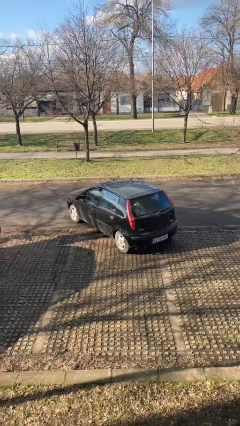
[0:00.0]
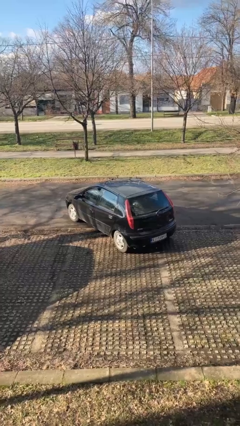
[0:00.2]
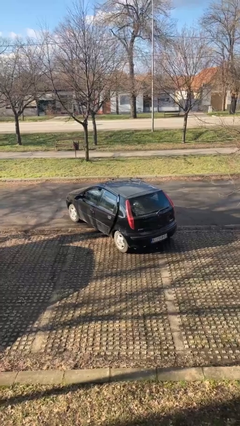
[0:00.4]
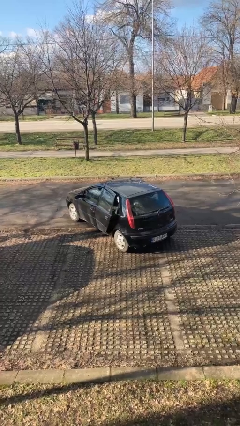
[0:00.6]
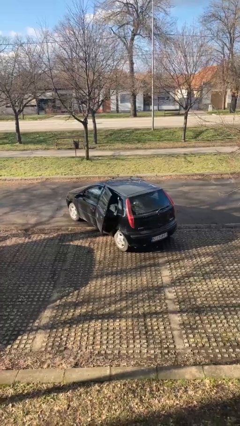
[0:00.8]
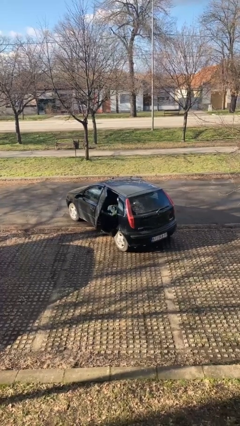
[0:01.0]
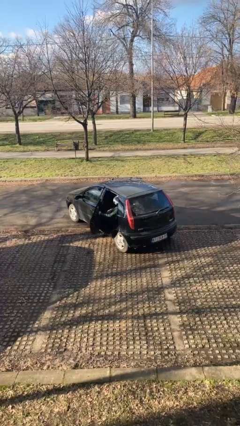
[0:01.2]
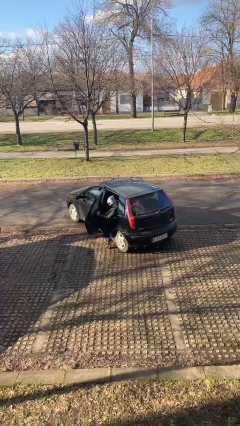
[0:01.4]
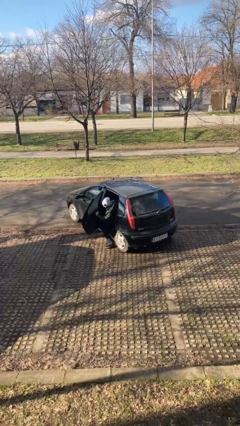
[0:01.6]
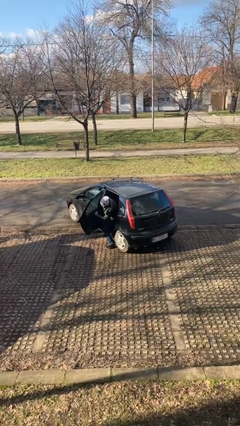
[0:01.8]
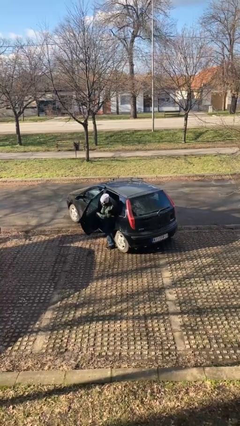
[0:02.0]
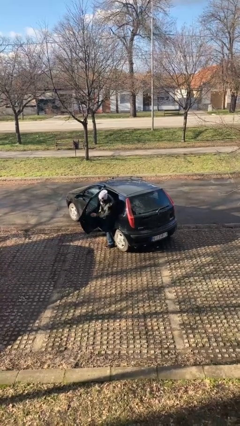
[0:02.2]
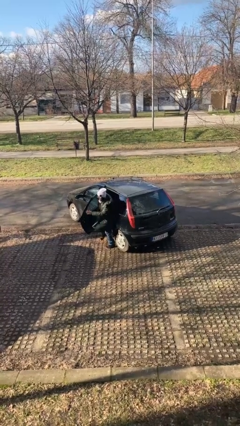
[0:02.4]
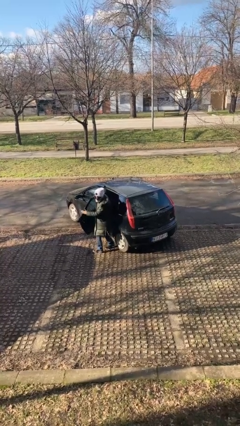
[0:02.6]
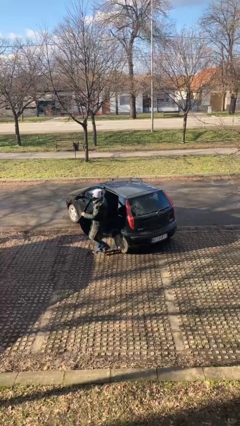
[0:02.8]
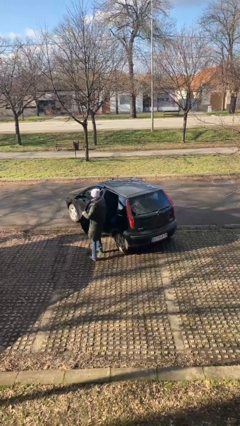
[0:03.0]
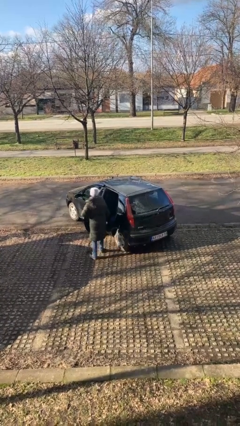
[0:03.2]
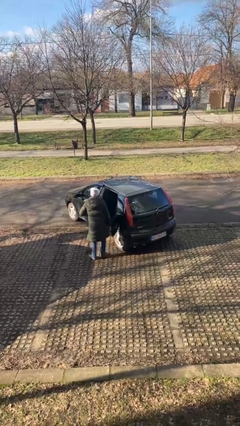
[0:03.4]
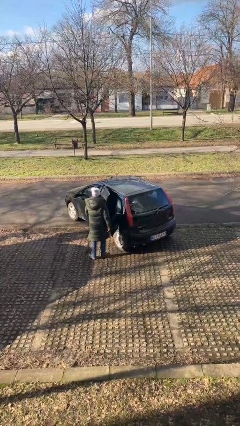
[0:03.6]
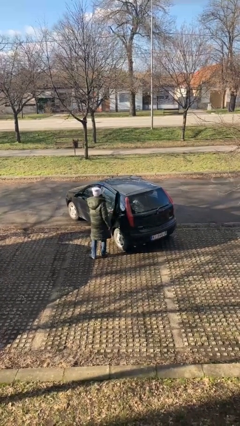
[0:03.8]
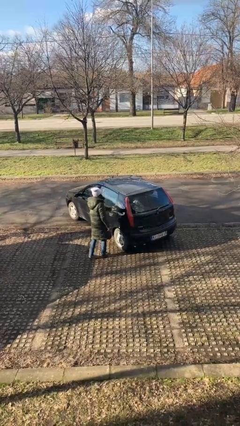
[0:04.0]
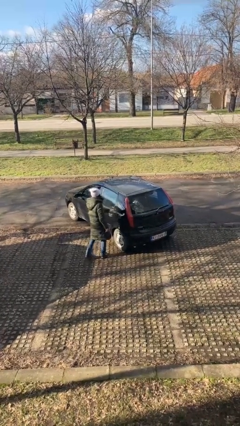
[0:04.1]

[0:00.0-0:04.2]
car drops off person

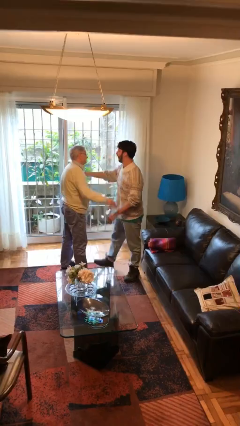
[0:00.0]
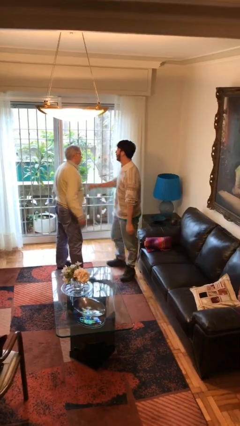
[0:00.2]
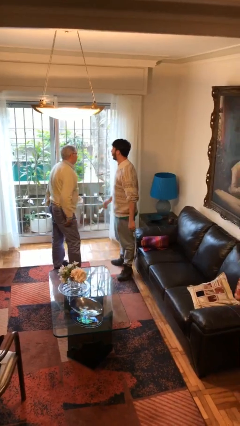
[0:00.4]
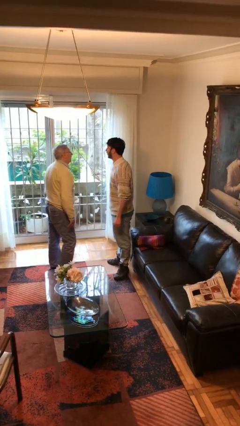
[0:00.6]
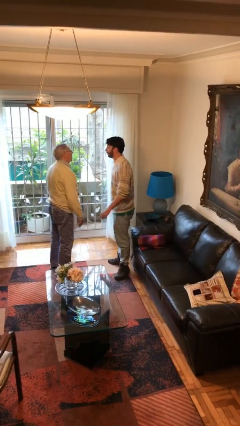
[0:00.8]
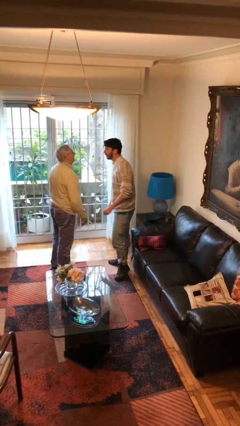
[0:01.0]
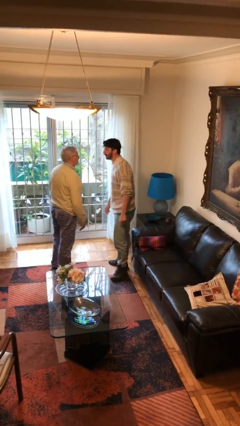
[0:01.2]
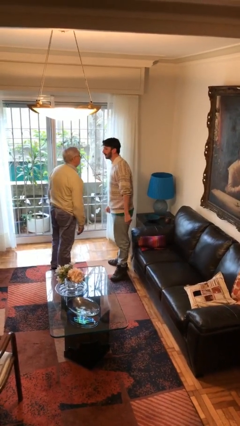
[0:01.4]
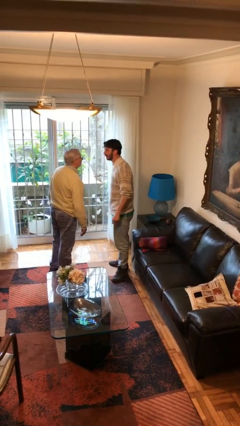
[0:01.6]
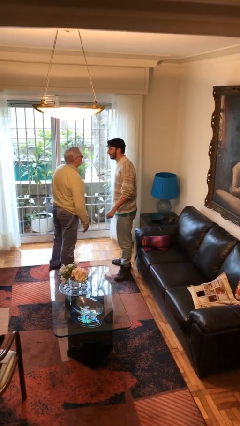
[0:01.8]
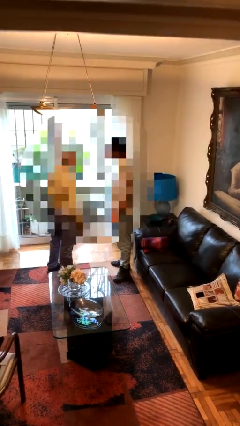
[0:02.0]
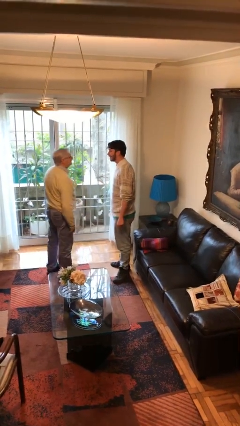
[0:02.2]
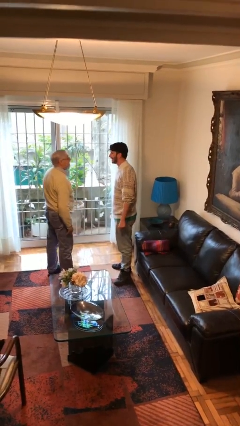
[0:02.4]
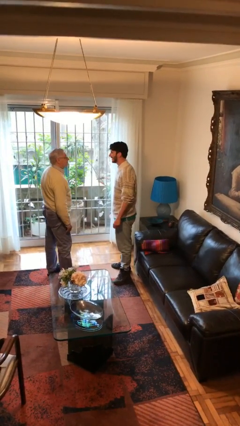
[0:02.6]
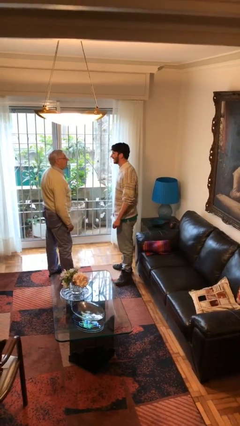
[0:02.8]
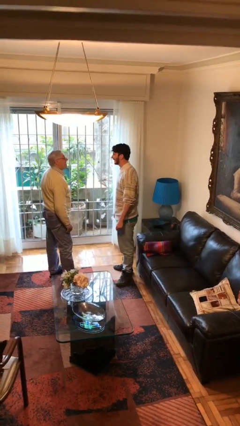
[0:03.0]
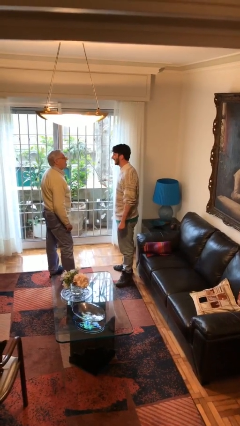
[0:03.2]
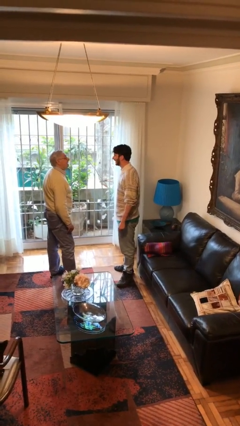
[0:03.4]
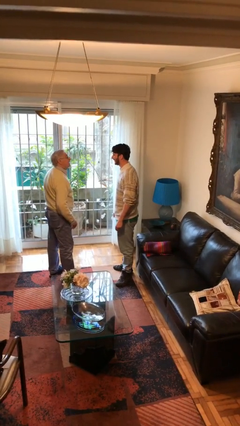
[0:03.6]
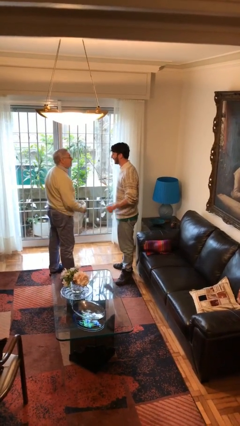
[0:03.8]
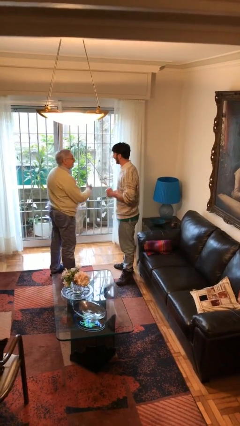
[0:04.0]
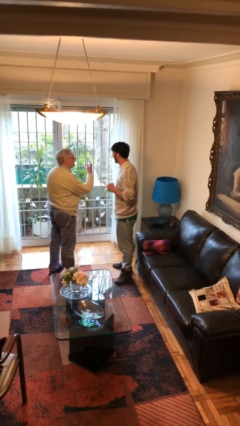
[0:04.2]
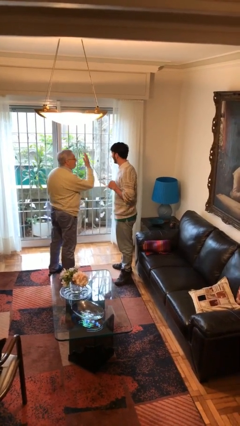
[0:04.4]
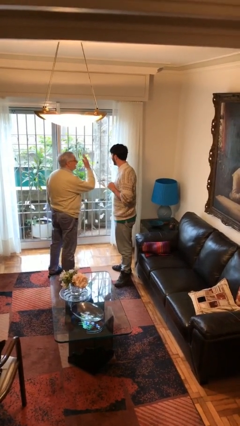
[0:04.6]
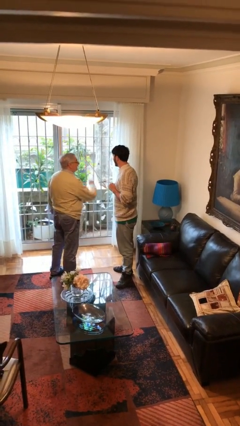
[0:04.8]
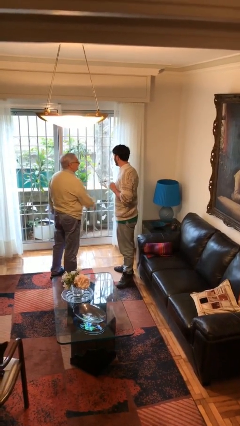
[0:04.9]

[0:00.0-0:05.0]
person talks to person

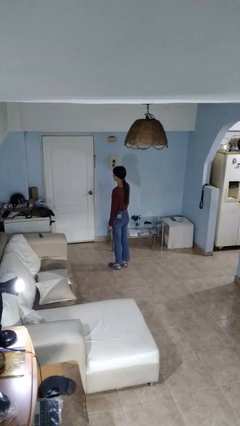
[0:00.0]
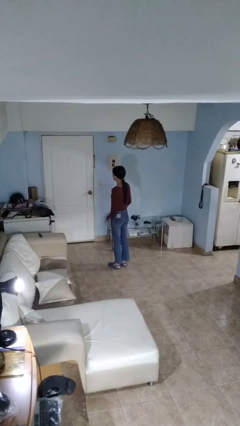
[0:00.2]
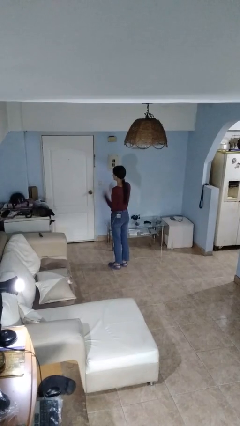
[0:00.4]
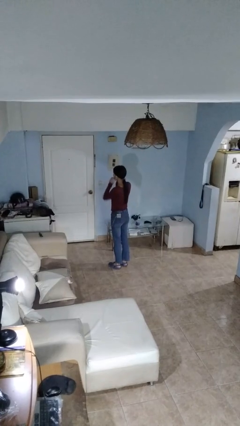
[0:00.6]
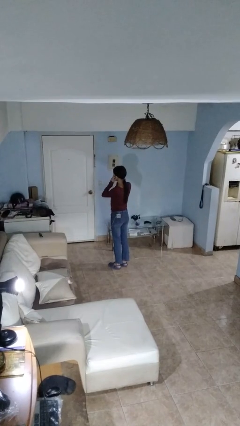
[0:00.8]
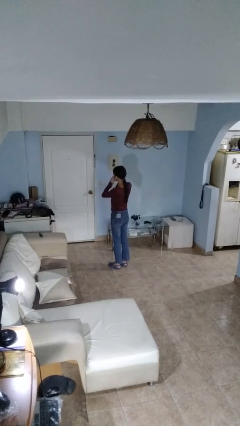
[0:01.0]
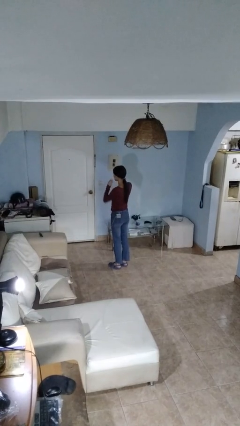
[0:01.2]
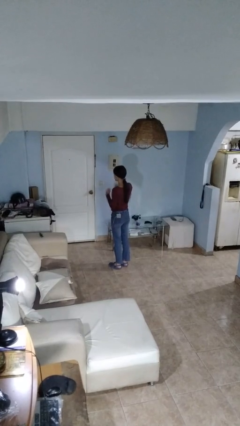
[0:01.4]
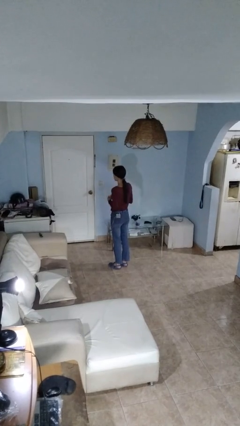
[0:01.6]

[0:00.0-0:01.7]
person takes off headphones

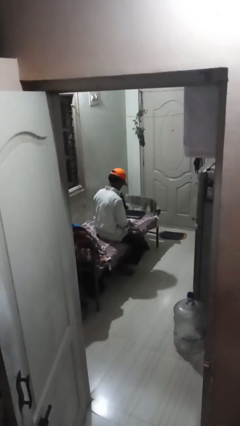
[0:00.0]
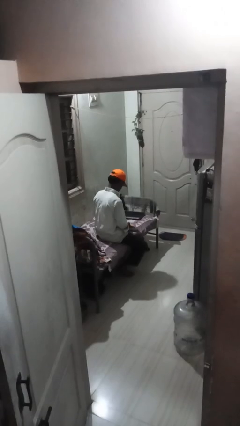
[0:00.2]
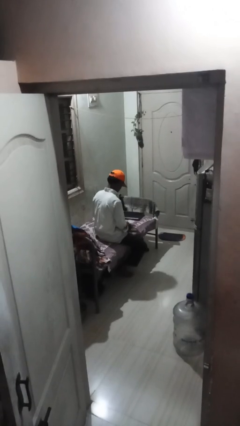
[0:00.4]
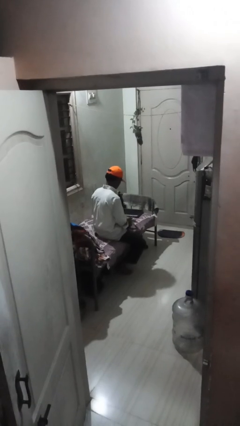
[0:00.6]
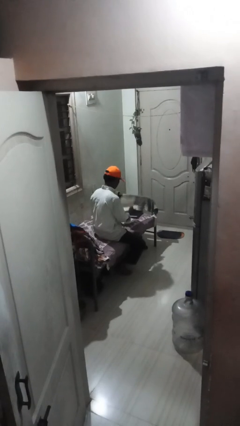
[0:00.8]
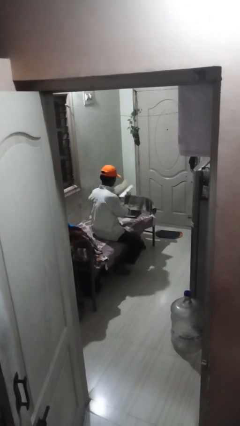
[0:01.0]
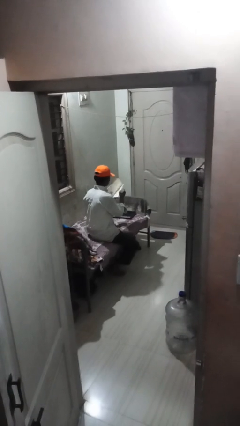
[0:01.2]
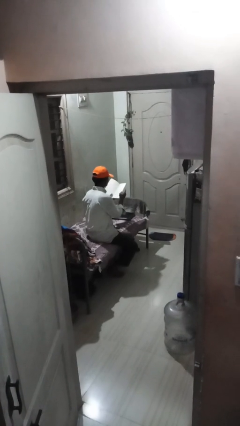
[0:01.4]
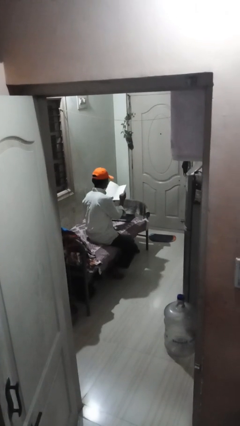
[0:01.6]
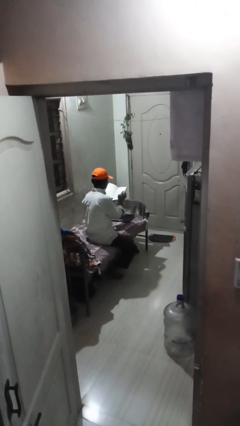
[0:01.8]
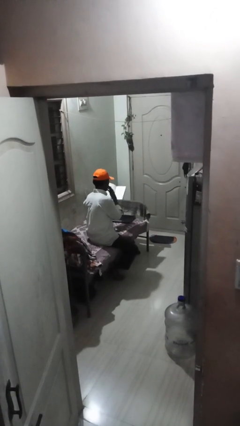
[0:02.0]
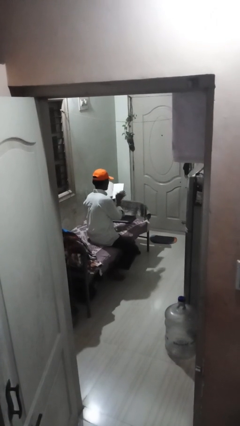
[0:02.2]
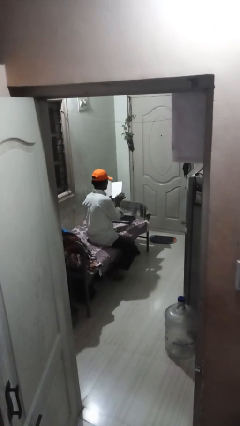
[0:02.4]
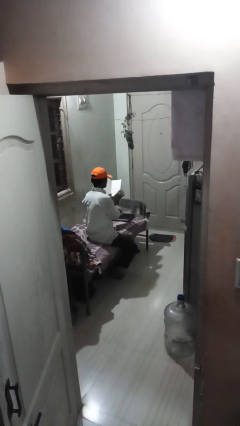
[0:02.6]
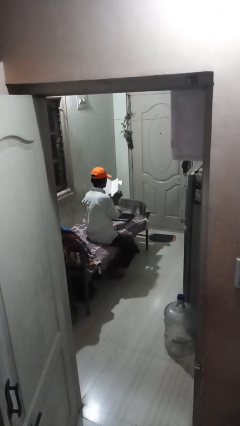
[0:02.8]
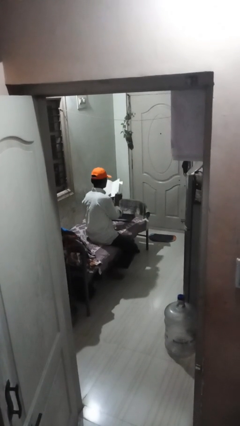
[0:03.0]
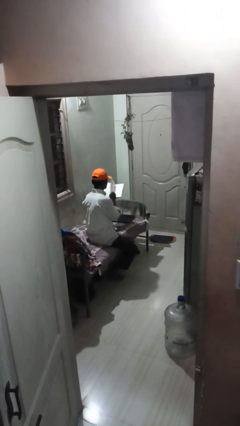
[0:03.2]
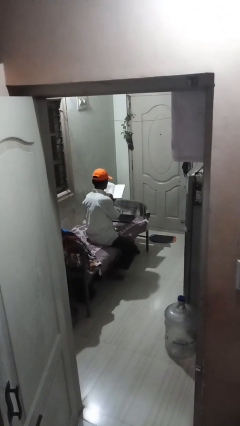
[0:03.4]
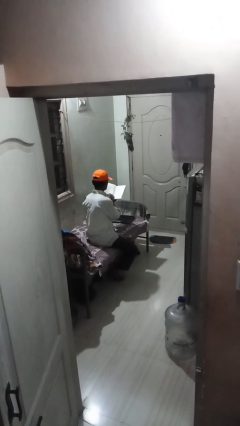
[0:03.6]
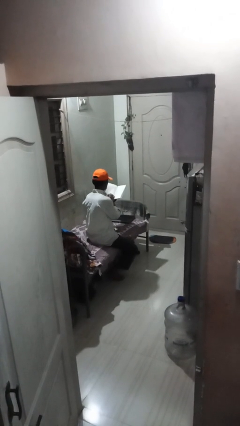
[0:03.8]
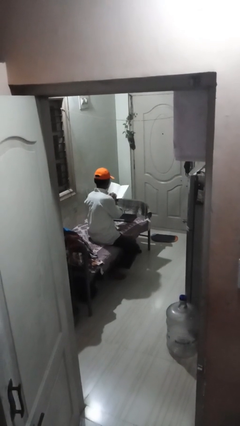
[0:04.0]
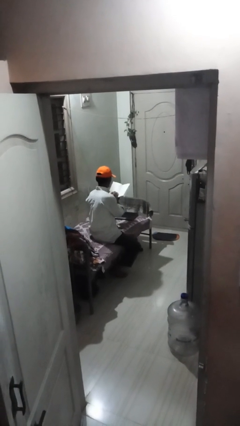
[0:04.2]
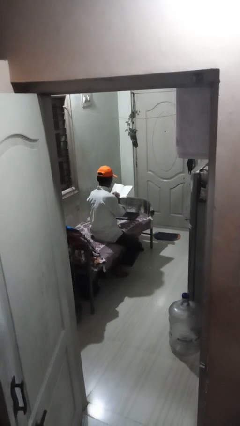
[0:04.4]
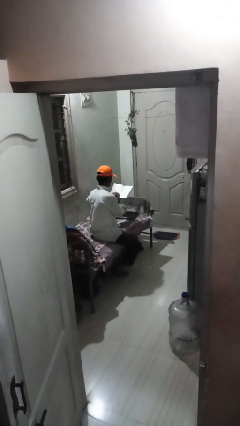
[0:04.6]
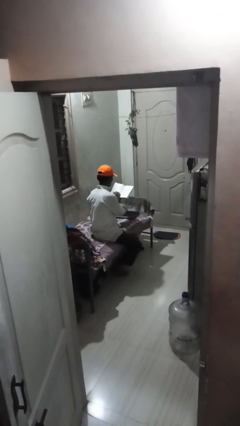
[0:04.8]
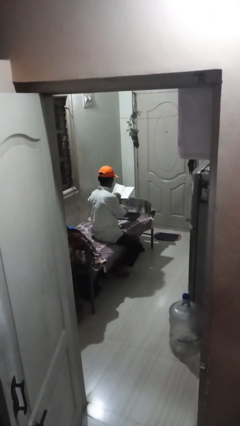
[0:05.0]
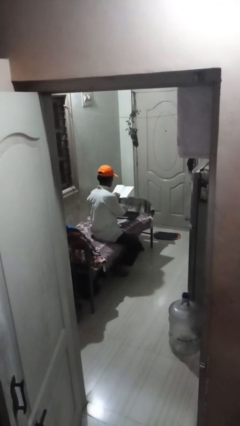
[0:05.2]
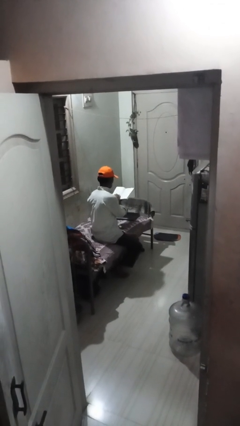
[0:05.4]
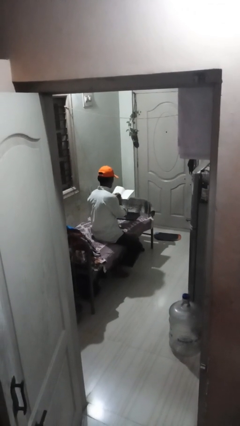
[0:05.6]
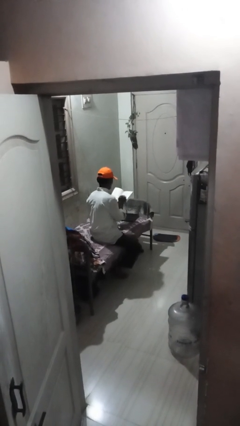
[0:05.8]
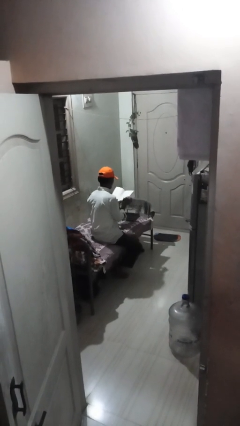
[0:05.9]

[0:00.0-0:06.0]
person reads book

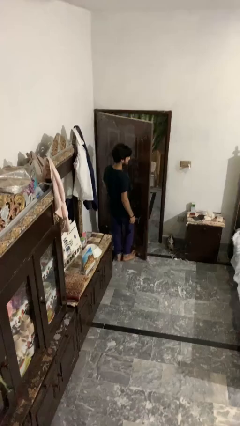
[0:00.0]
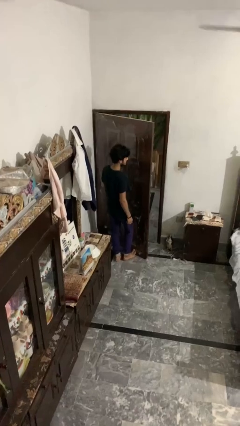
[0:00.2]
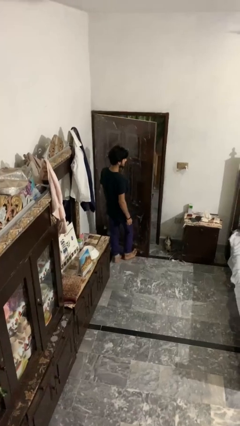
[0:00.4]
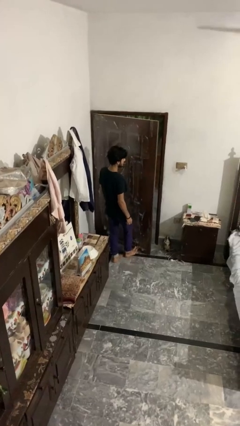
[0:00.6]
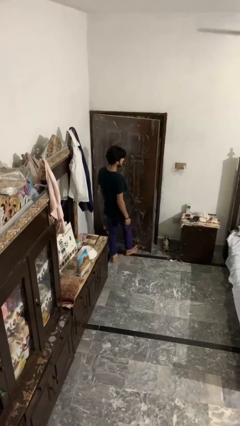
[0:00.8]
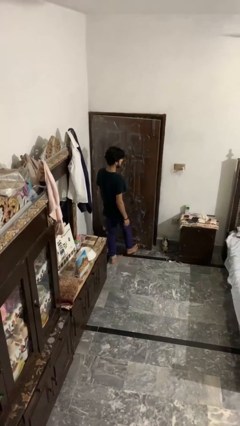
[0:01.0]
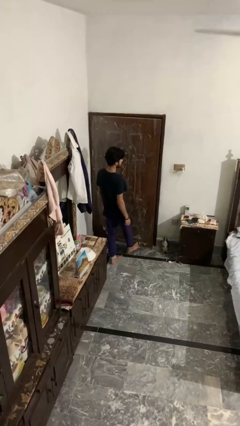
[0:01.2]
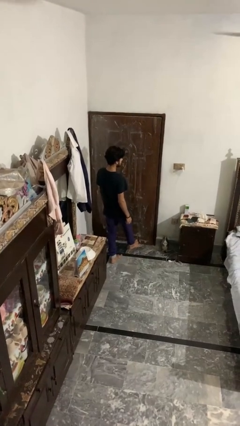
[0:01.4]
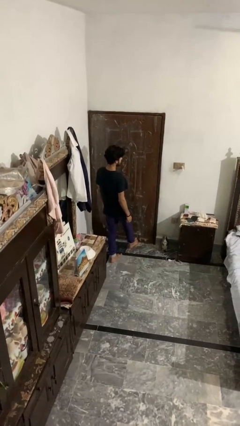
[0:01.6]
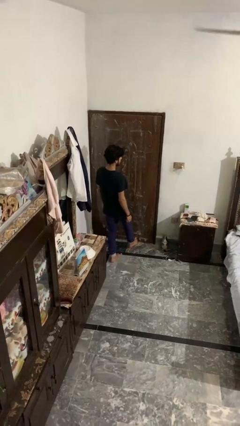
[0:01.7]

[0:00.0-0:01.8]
person closes door with foot
